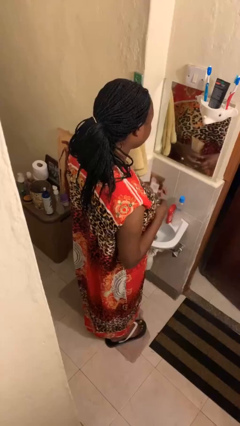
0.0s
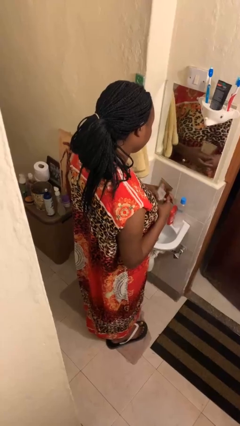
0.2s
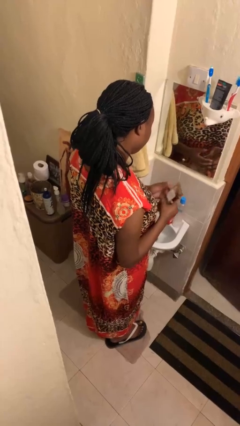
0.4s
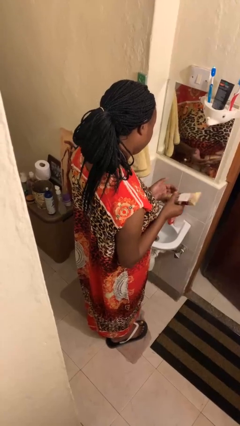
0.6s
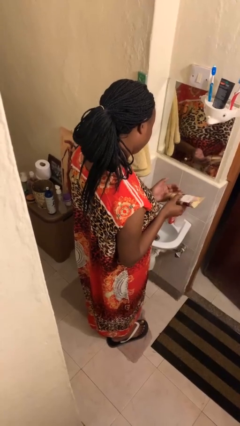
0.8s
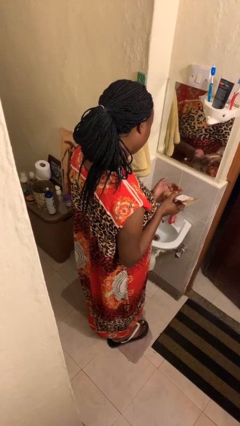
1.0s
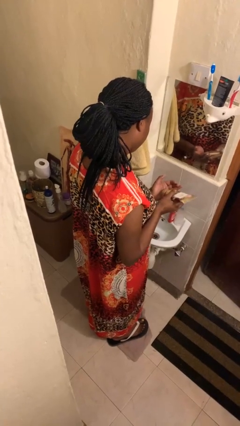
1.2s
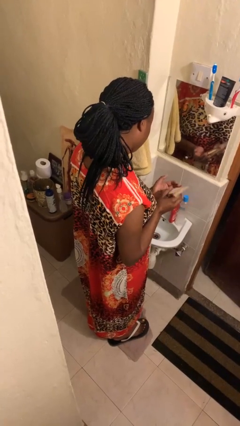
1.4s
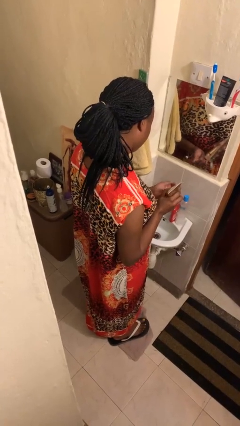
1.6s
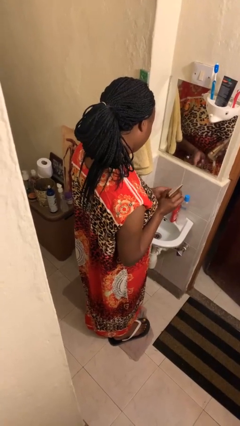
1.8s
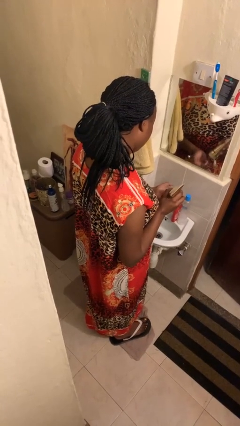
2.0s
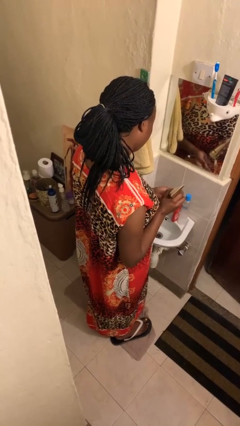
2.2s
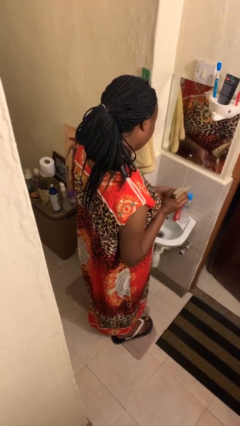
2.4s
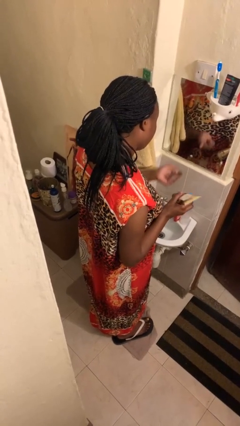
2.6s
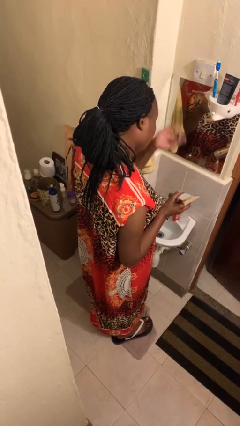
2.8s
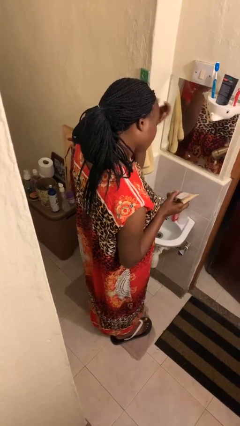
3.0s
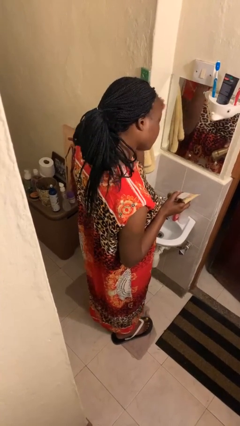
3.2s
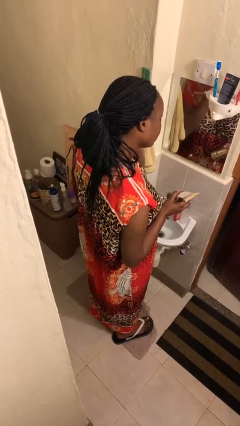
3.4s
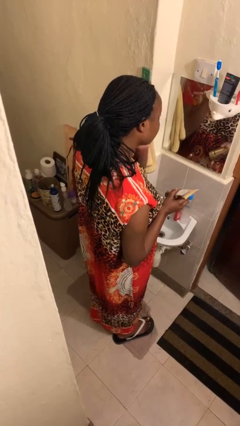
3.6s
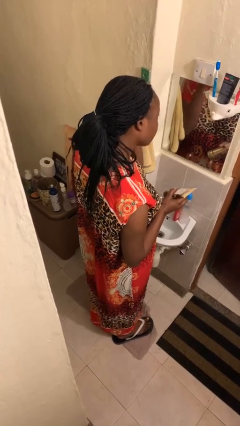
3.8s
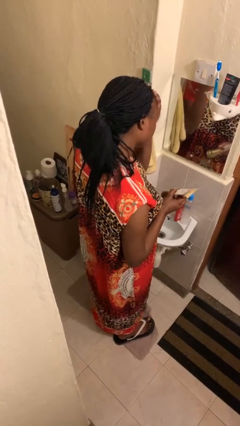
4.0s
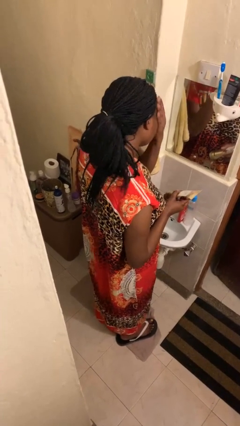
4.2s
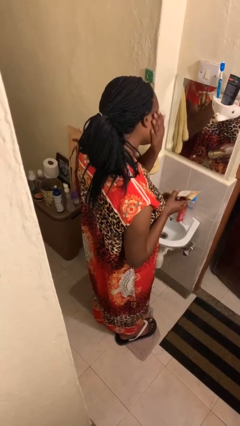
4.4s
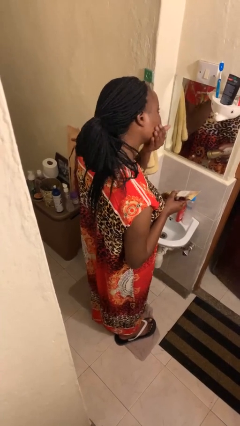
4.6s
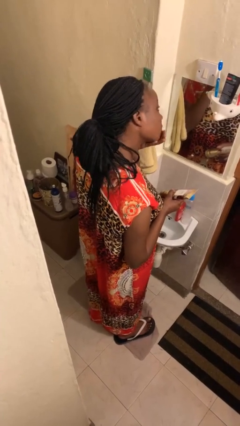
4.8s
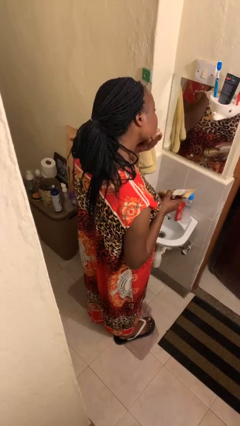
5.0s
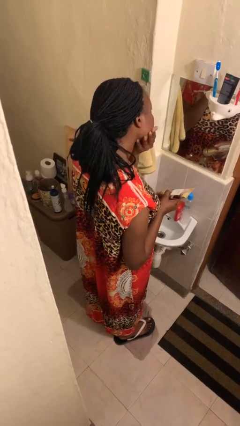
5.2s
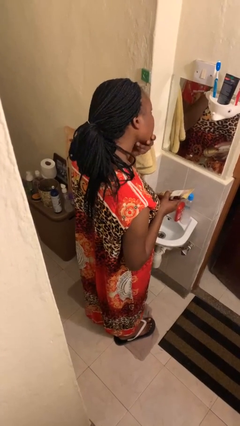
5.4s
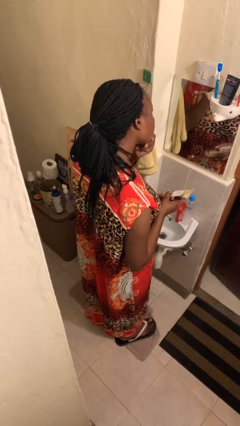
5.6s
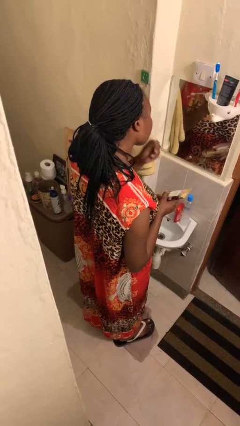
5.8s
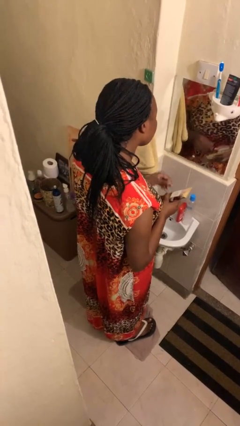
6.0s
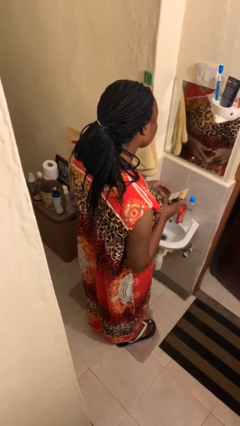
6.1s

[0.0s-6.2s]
person applies facial moisturizer

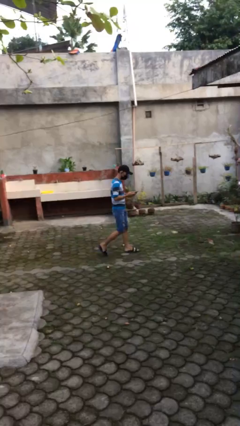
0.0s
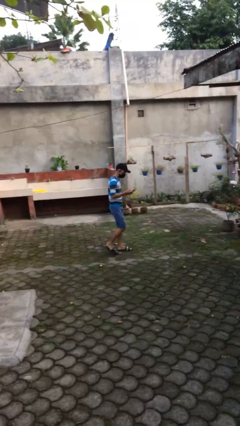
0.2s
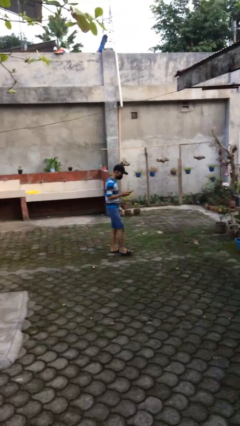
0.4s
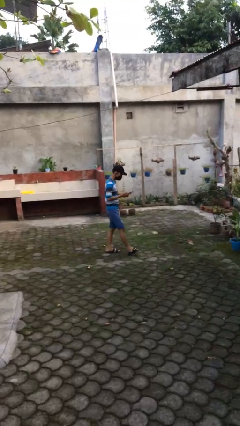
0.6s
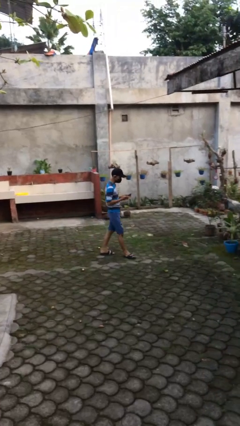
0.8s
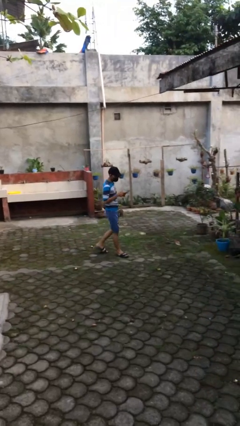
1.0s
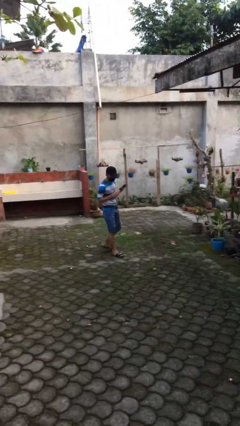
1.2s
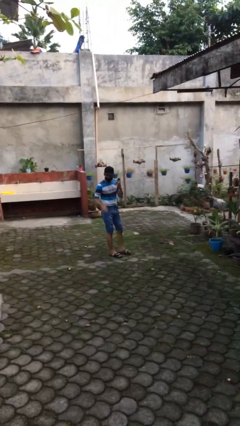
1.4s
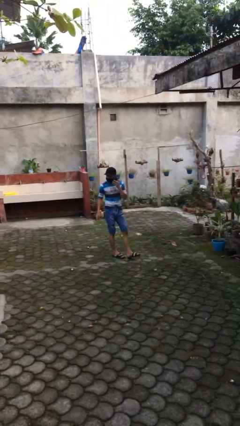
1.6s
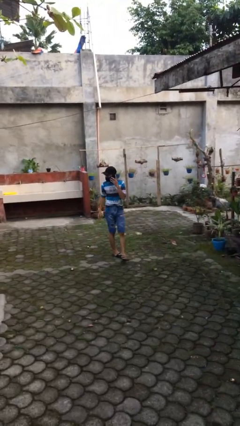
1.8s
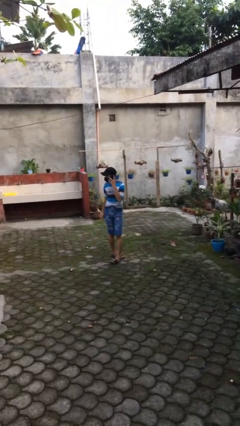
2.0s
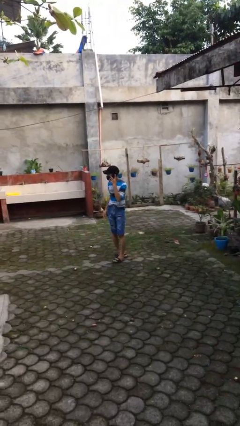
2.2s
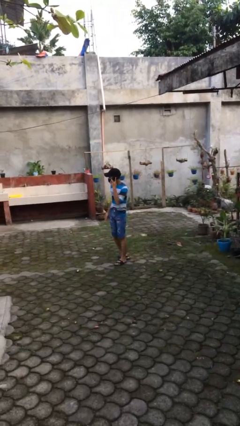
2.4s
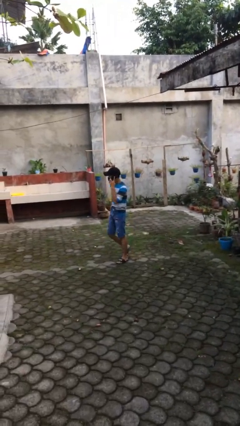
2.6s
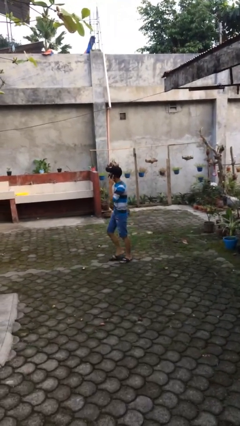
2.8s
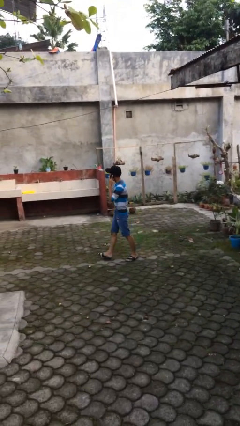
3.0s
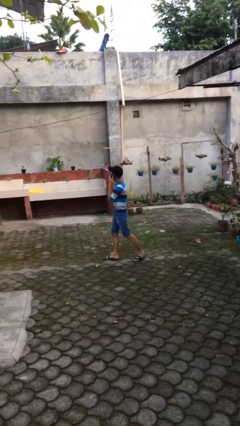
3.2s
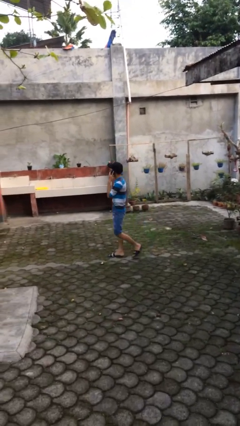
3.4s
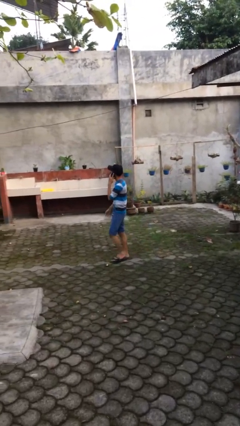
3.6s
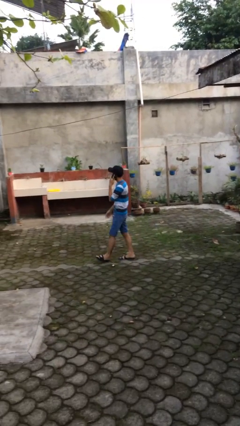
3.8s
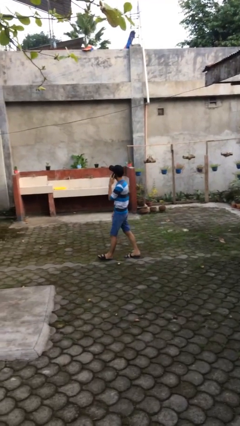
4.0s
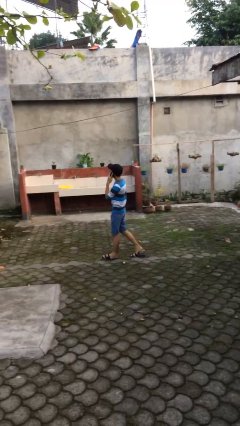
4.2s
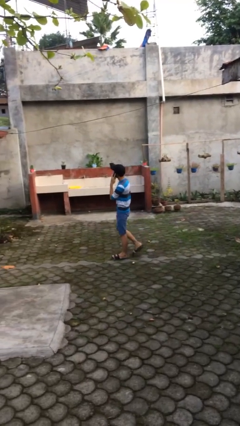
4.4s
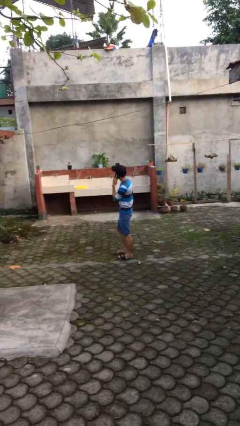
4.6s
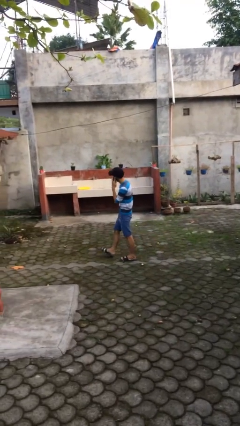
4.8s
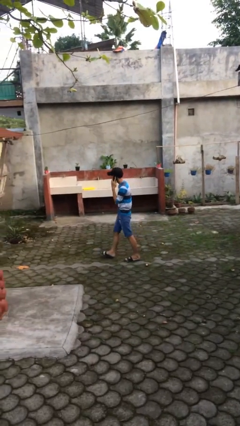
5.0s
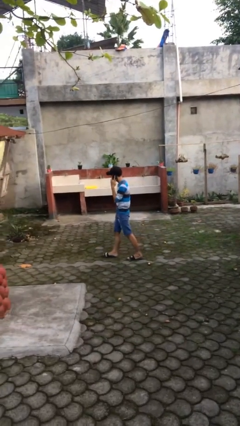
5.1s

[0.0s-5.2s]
person talks on phone

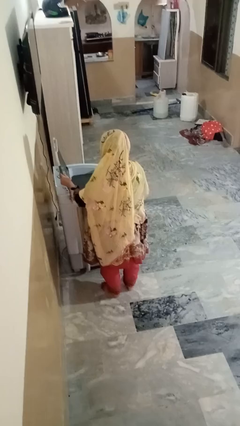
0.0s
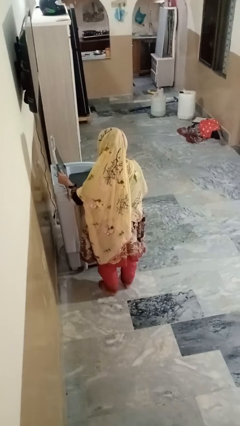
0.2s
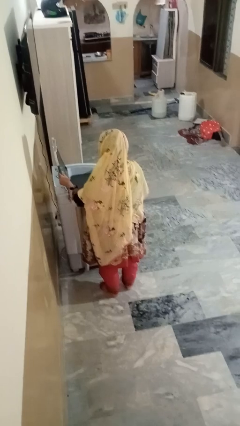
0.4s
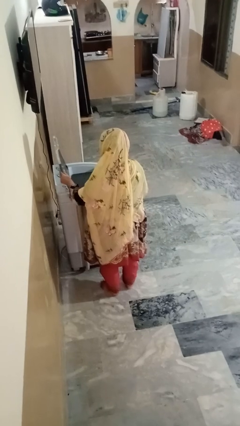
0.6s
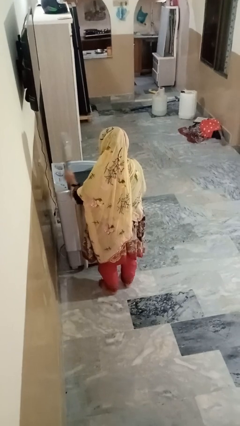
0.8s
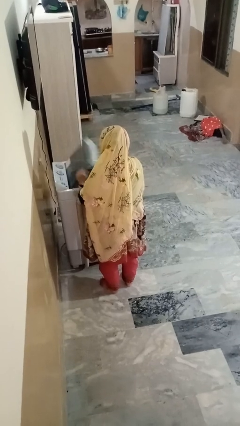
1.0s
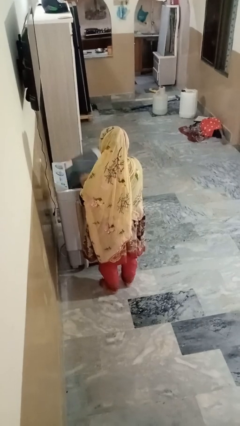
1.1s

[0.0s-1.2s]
person closes clothes washer

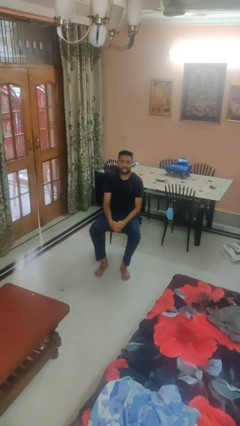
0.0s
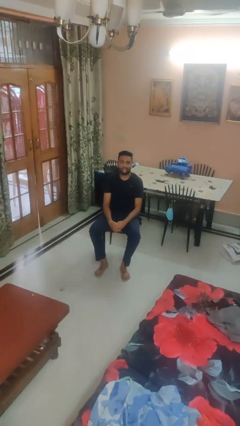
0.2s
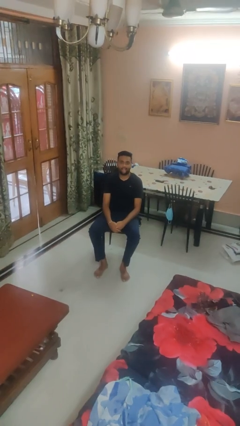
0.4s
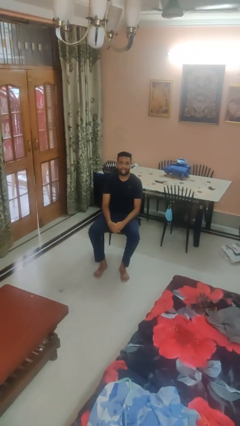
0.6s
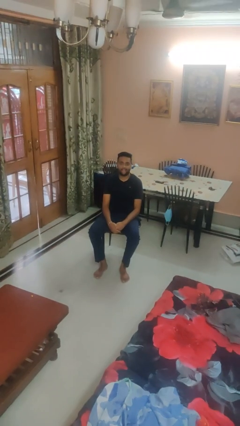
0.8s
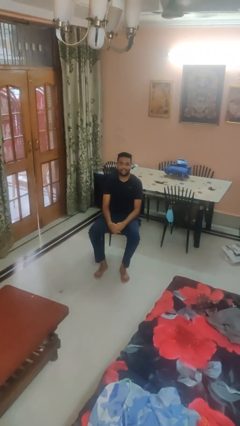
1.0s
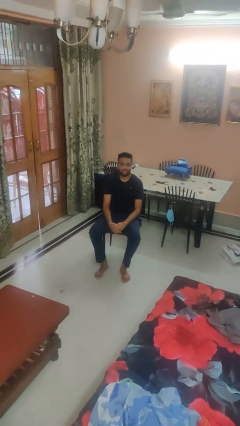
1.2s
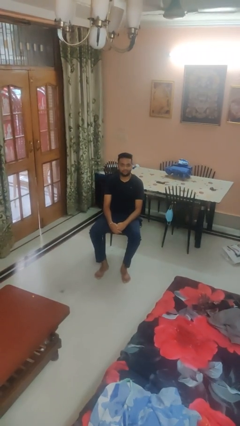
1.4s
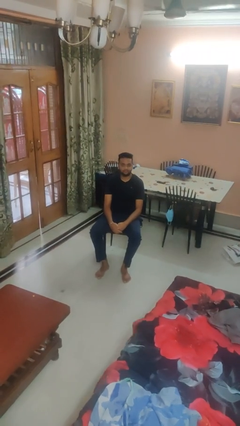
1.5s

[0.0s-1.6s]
person sticks out tongue

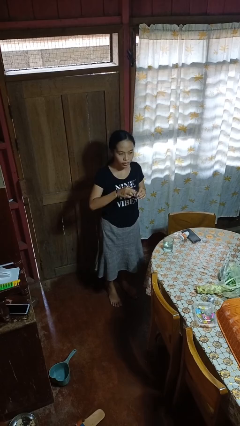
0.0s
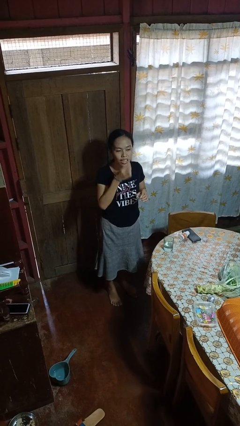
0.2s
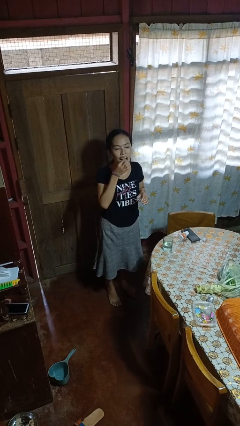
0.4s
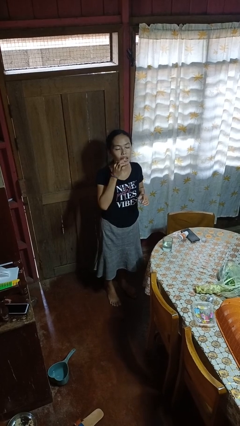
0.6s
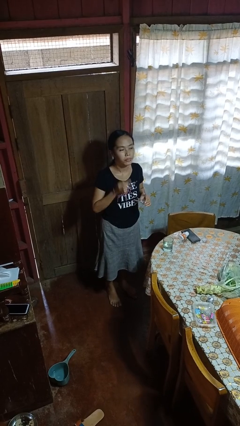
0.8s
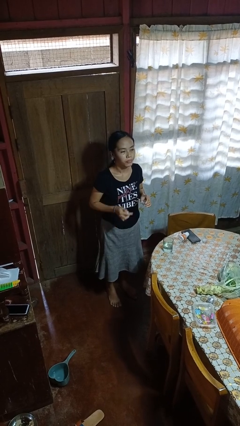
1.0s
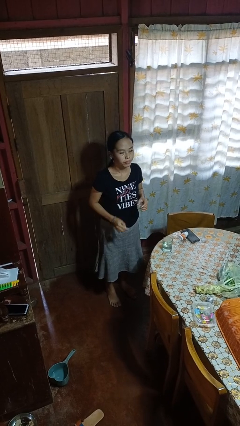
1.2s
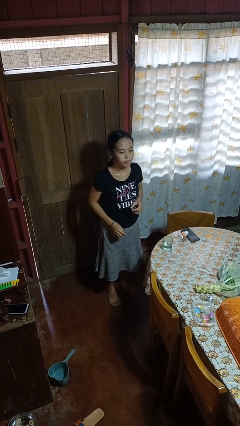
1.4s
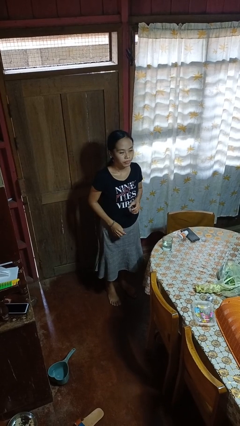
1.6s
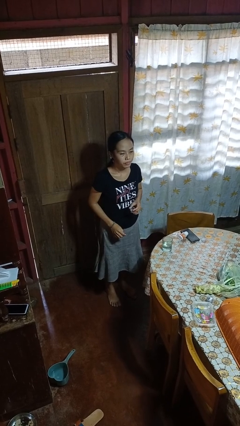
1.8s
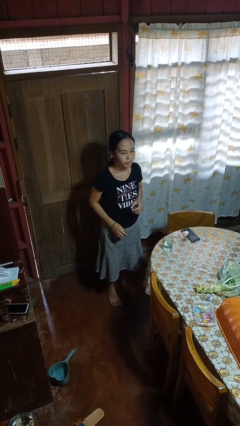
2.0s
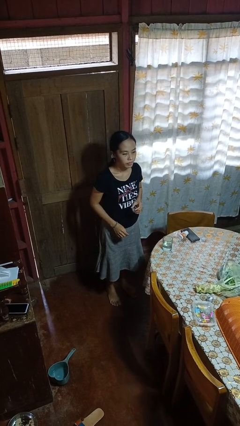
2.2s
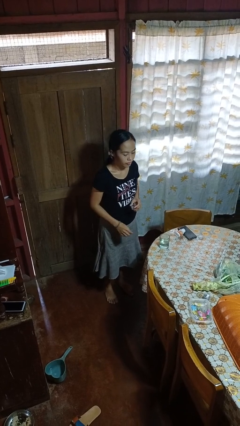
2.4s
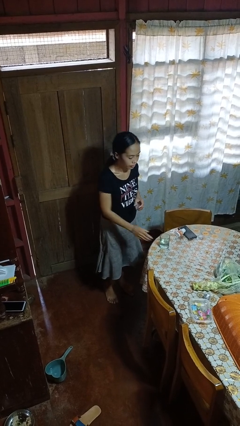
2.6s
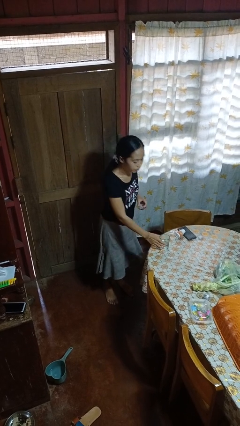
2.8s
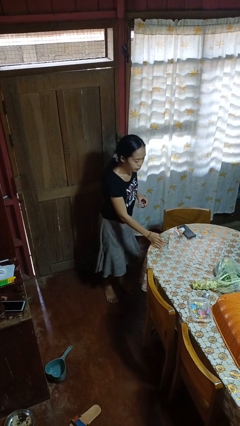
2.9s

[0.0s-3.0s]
person takes medicine pills

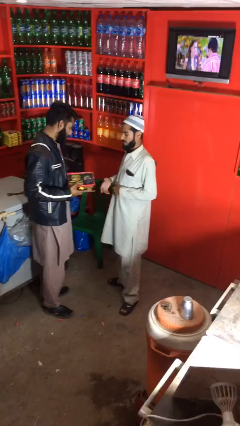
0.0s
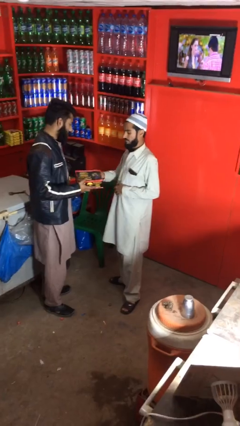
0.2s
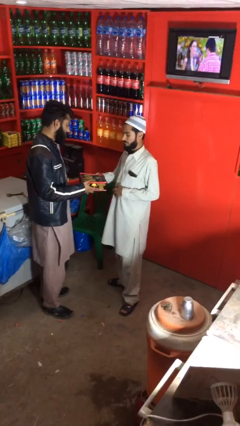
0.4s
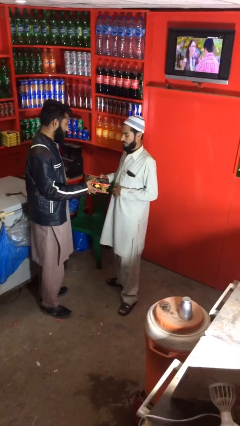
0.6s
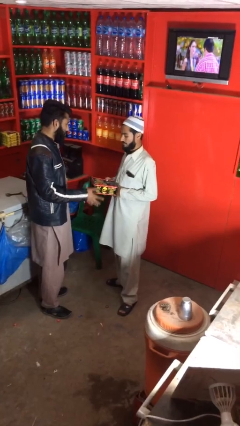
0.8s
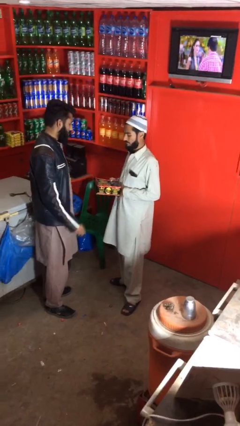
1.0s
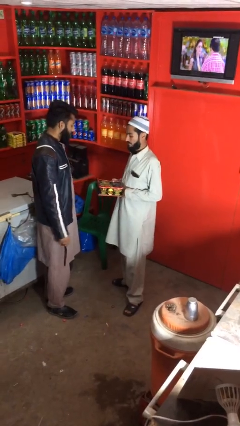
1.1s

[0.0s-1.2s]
person transfers object to person
